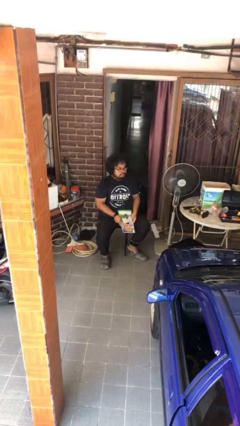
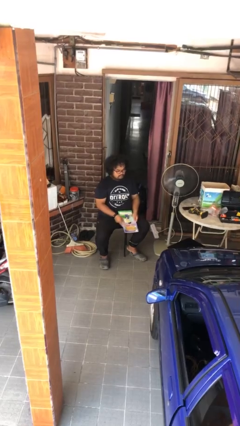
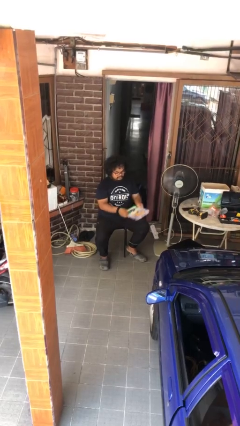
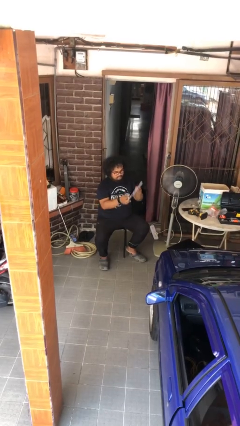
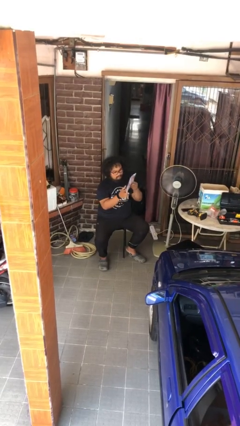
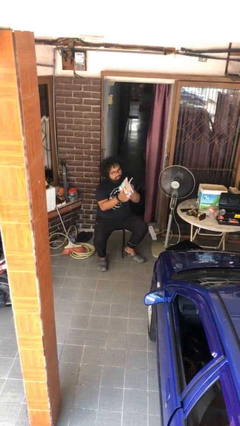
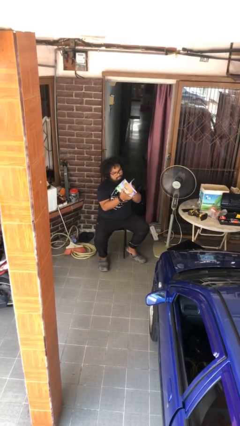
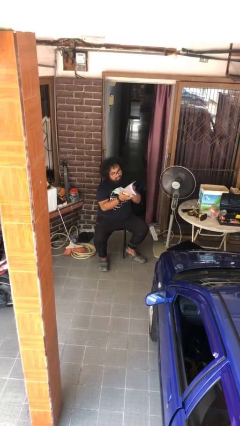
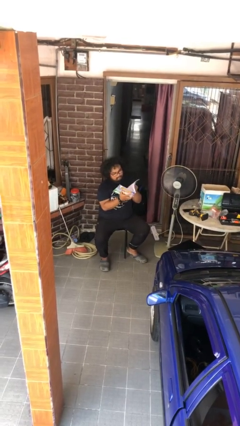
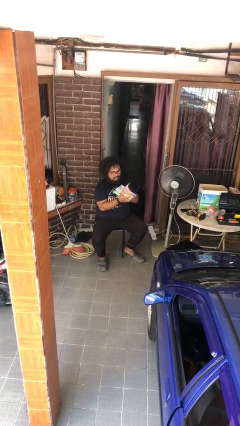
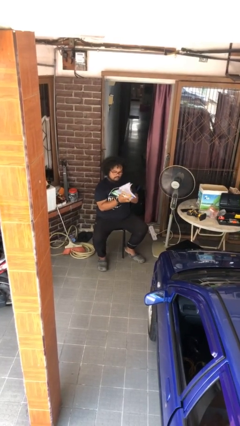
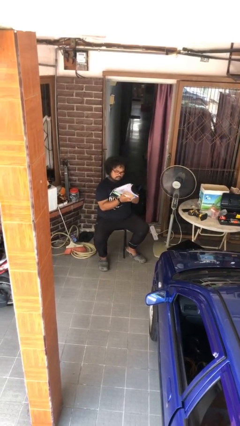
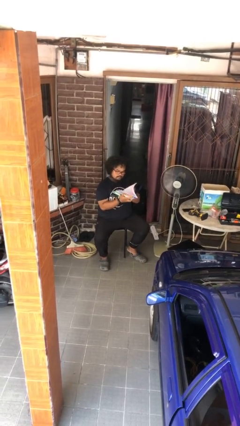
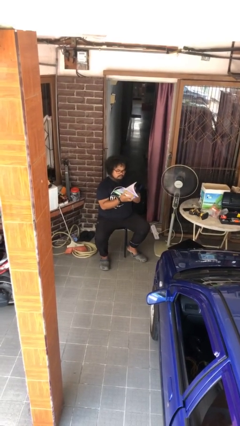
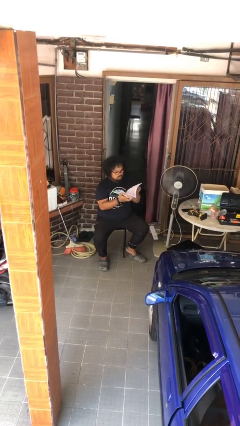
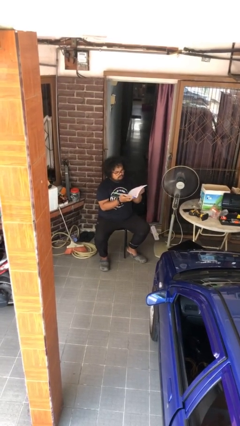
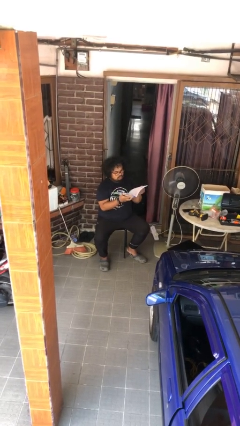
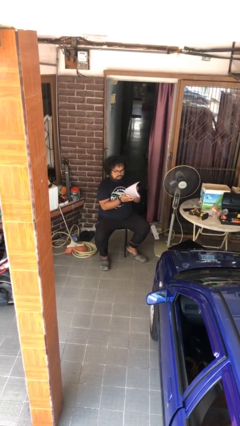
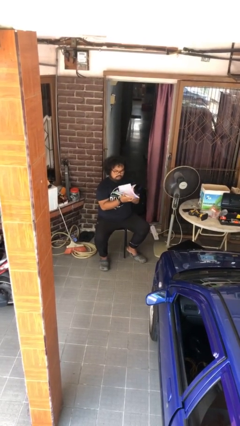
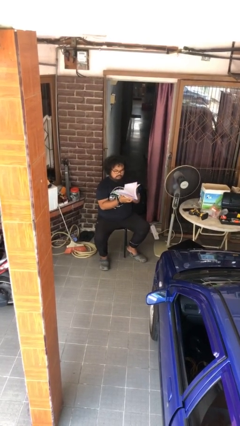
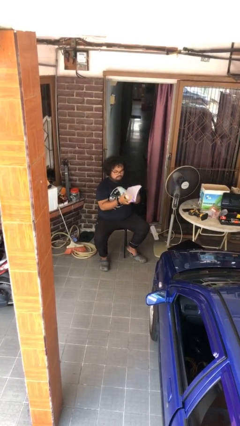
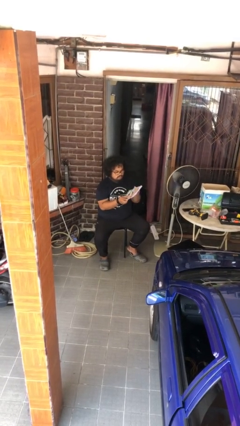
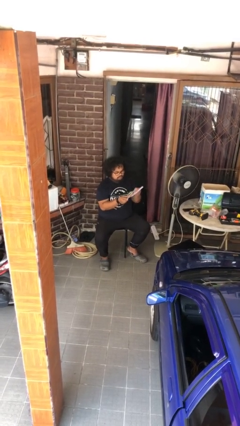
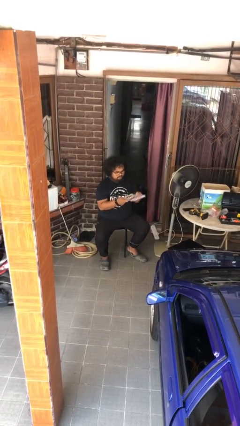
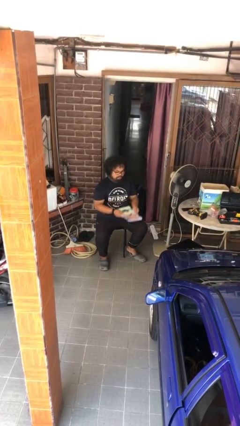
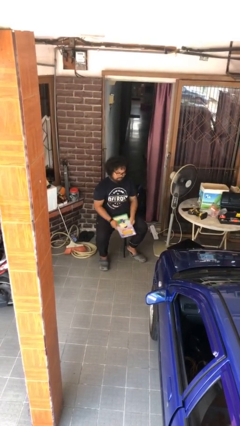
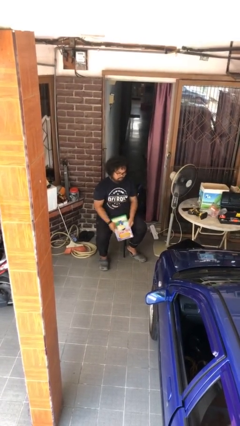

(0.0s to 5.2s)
person reads document

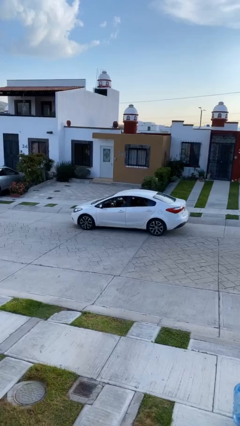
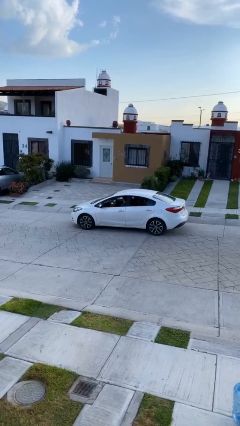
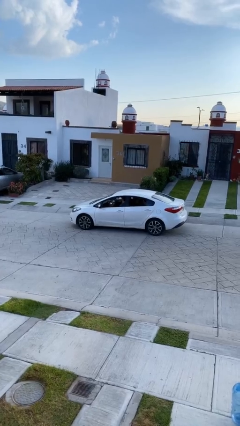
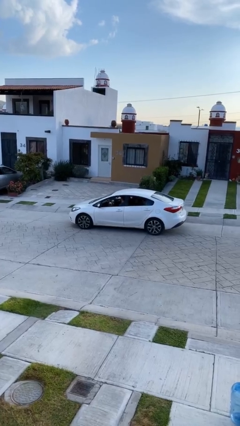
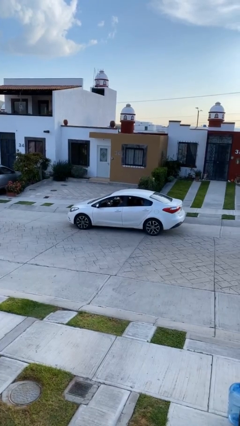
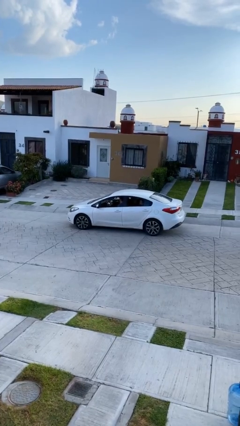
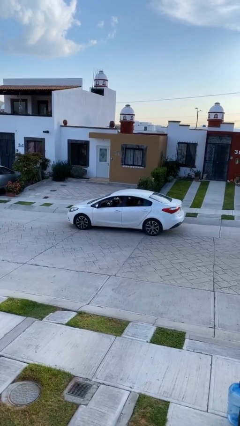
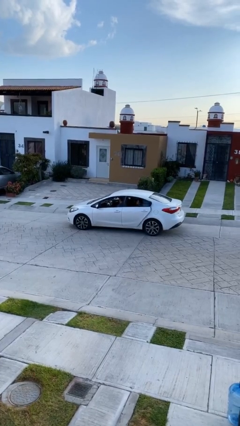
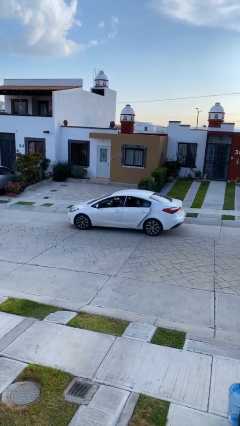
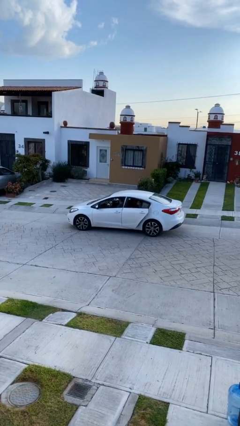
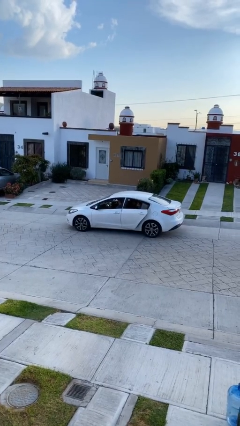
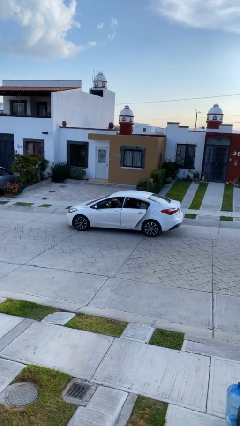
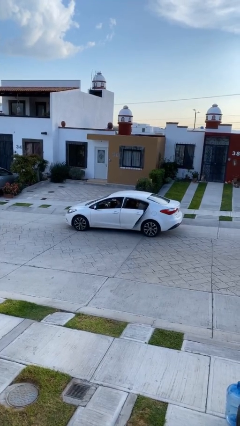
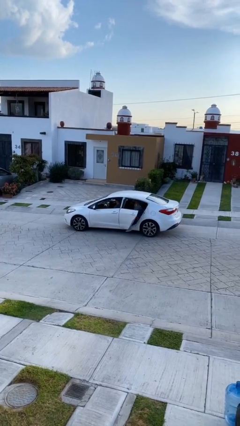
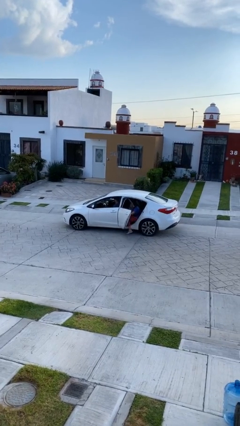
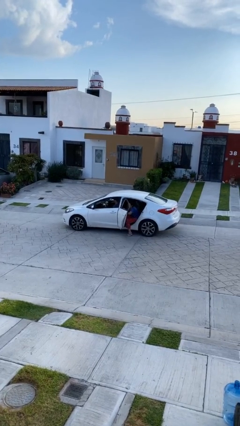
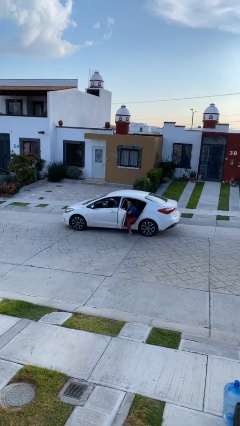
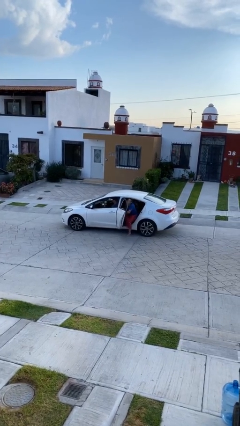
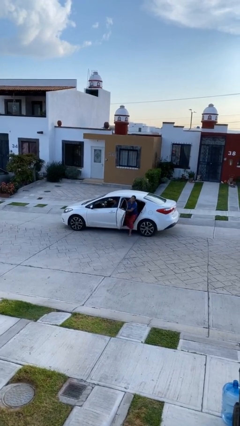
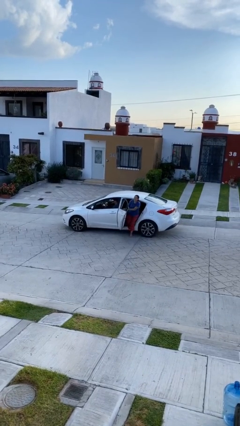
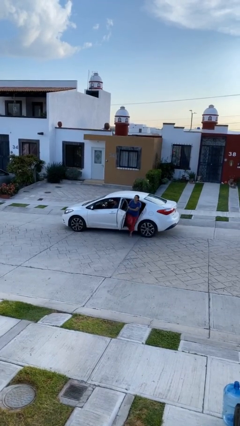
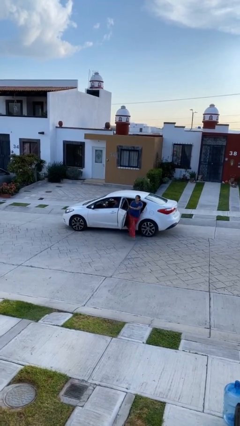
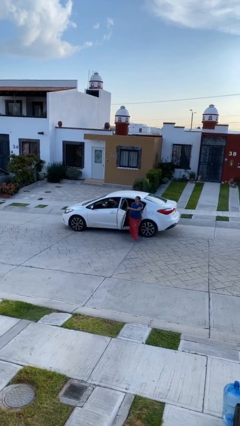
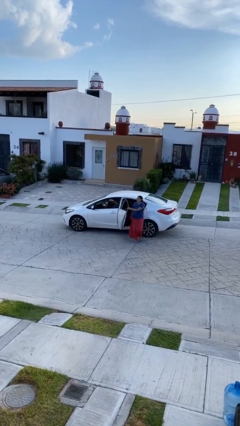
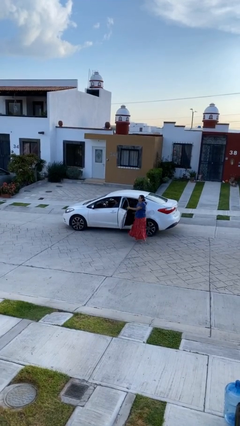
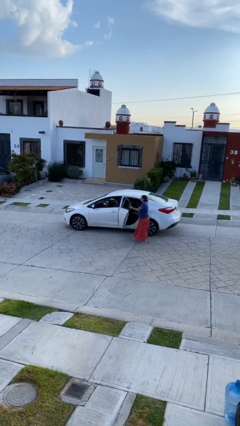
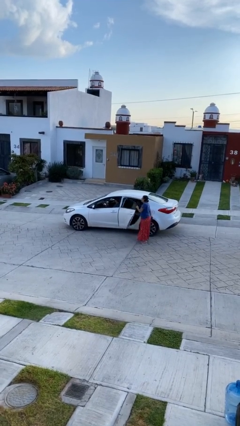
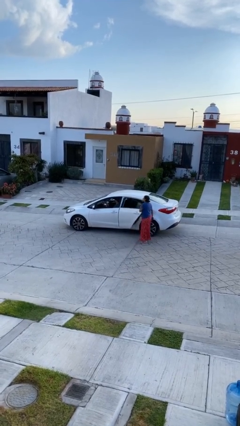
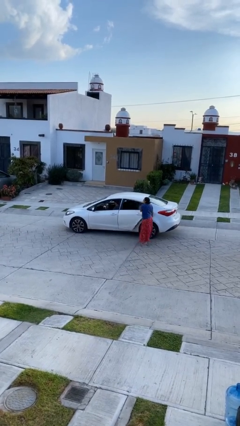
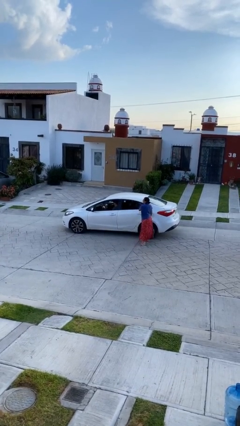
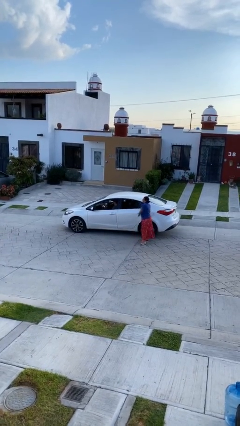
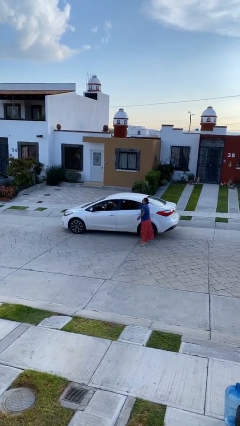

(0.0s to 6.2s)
car drops off person

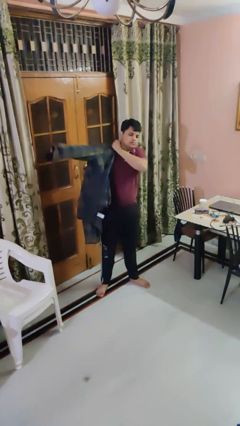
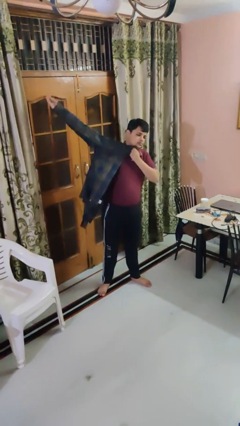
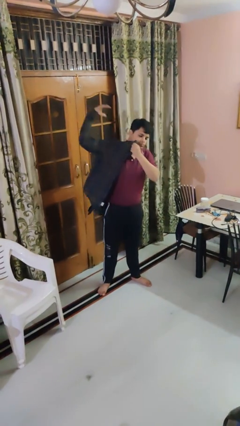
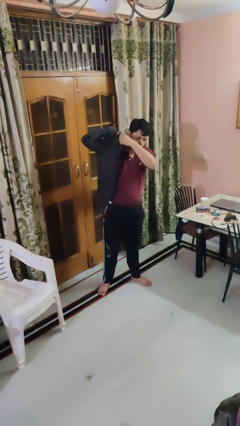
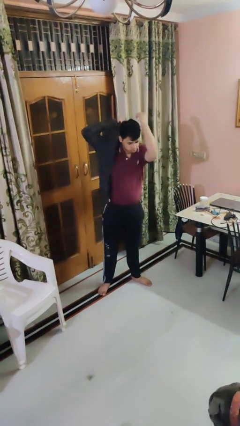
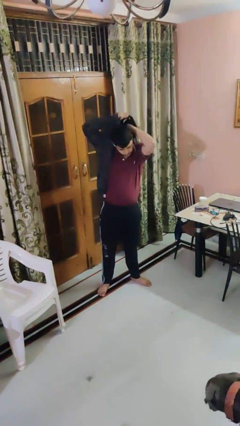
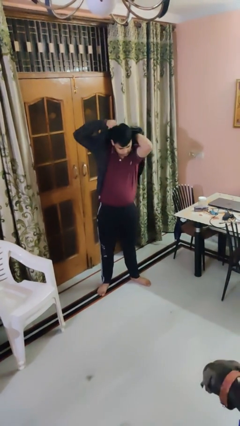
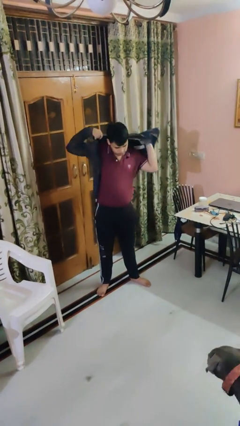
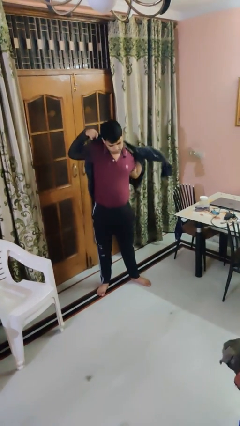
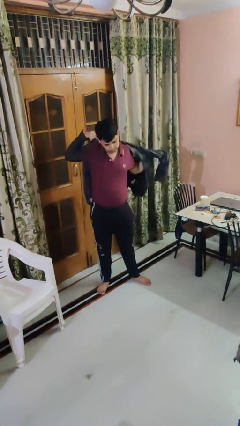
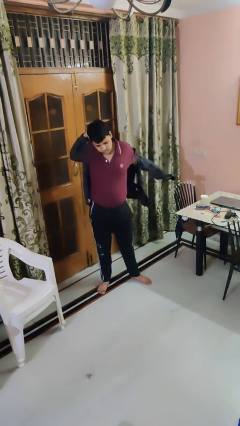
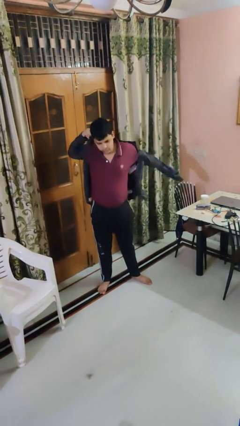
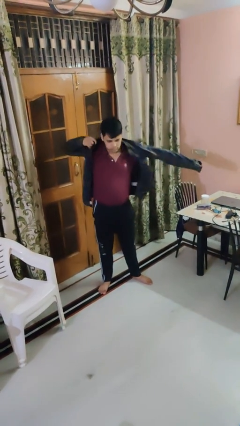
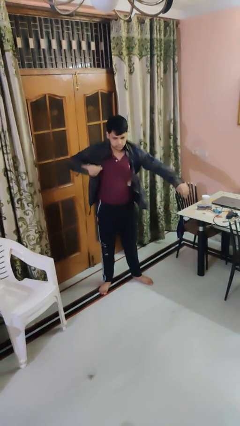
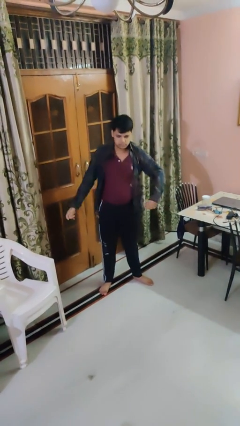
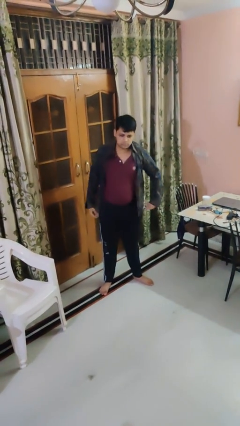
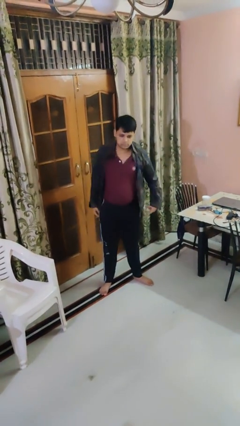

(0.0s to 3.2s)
person puts on shirt

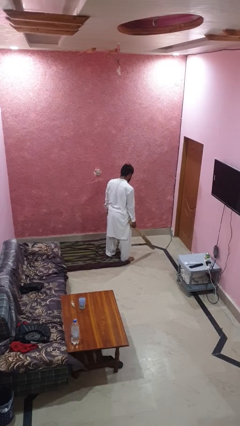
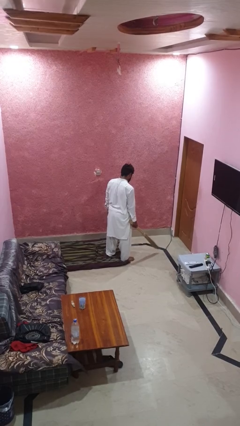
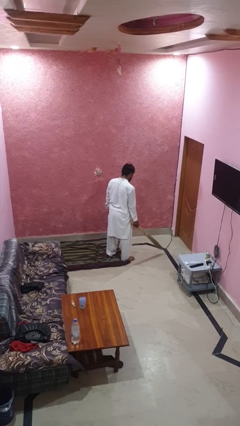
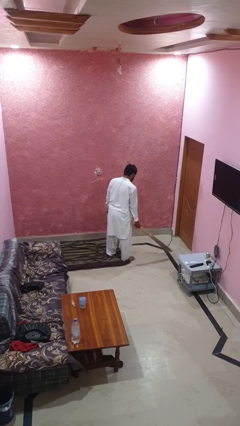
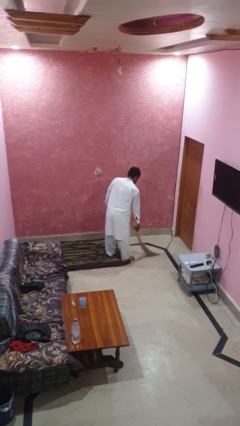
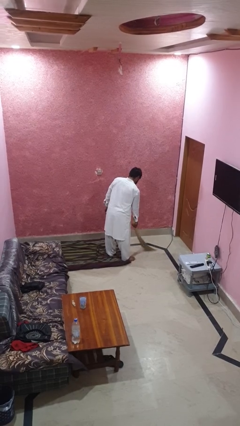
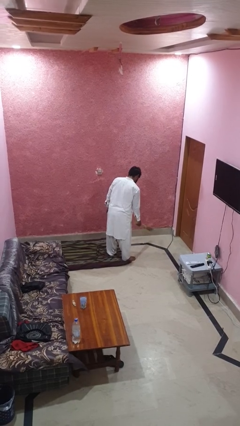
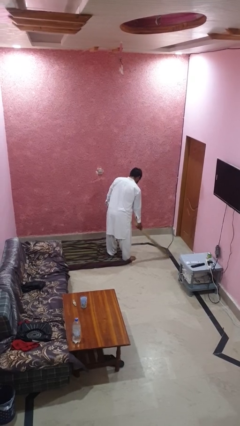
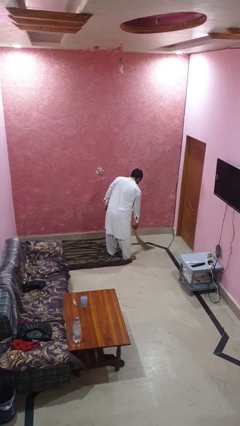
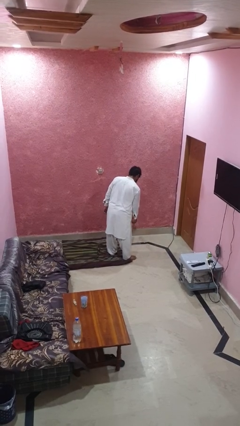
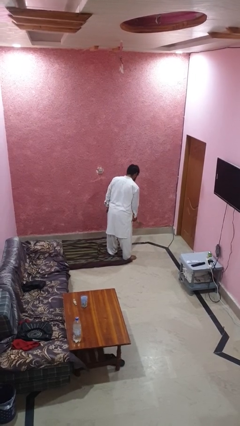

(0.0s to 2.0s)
person sweeps floor

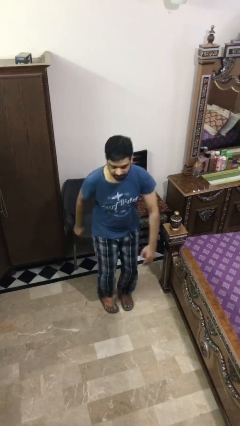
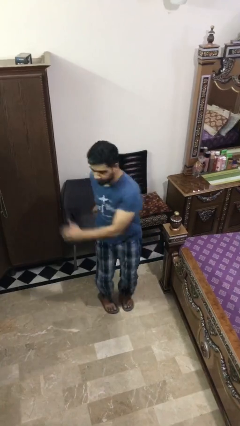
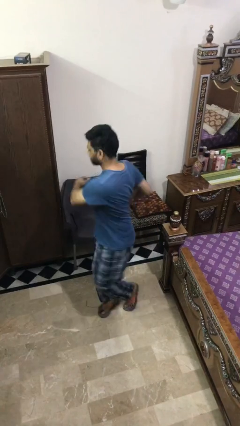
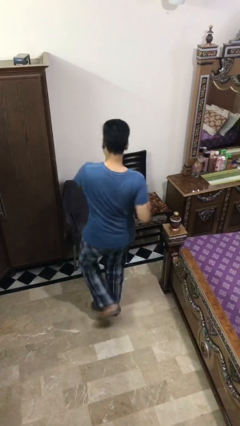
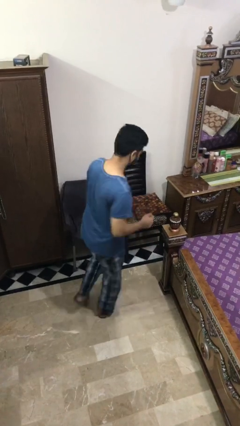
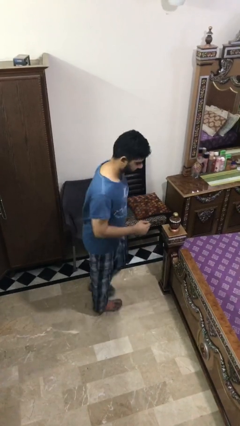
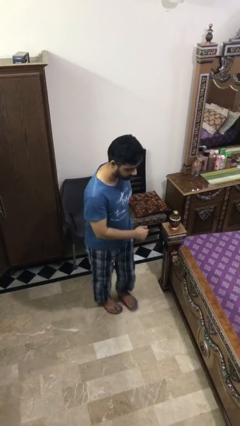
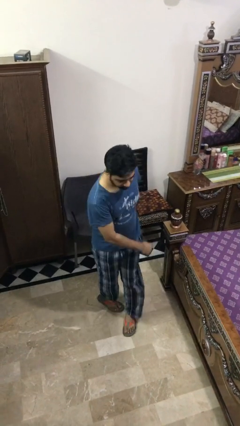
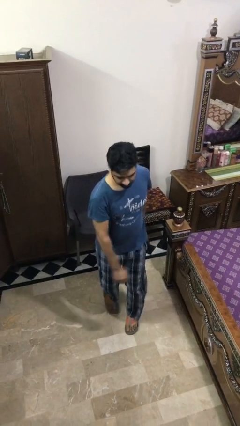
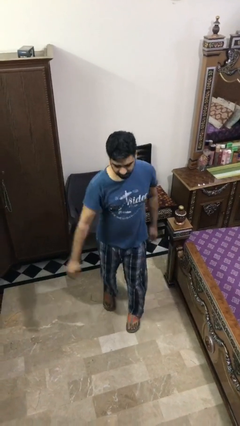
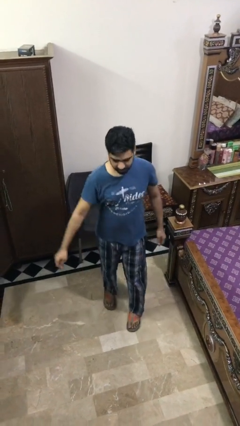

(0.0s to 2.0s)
person twirls
